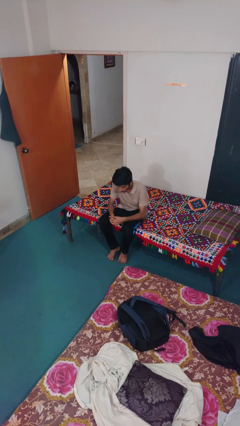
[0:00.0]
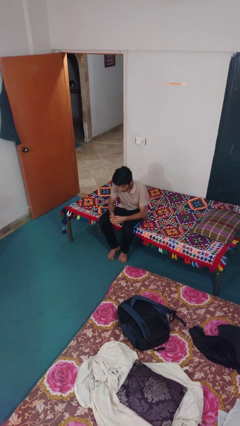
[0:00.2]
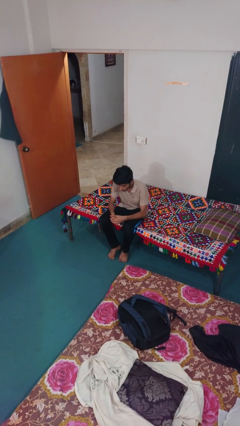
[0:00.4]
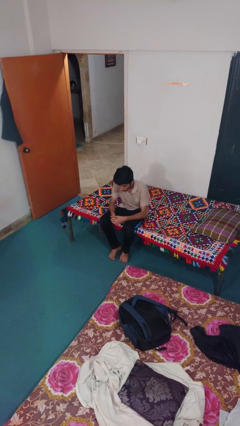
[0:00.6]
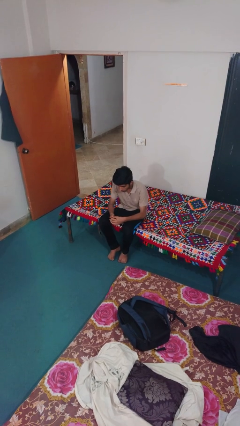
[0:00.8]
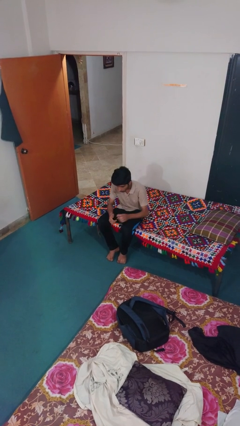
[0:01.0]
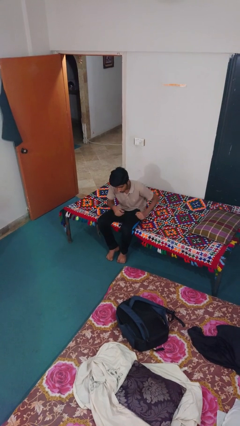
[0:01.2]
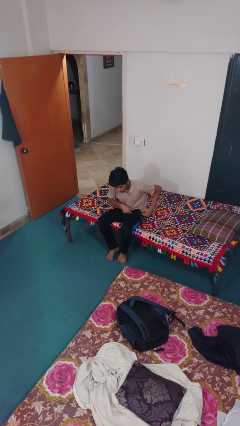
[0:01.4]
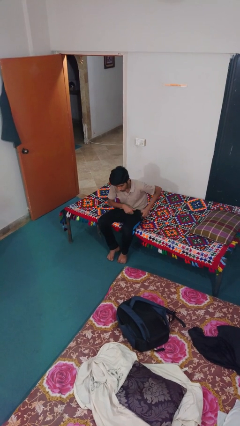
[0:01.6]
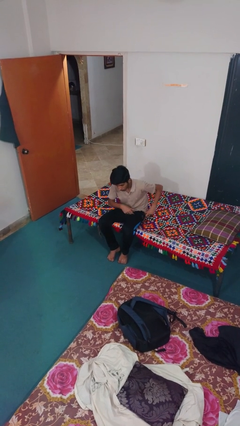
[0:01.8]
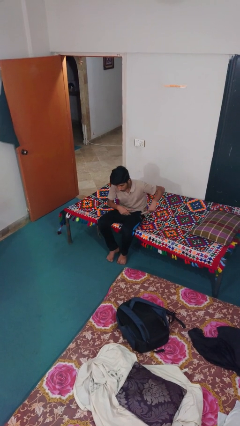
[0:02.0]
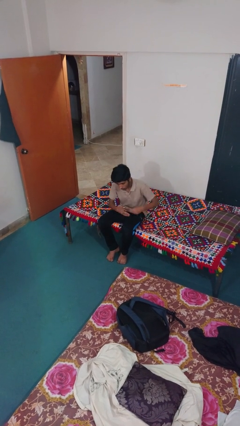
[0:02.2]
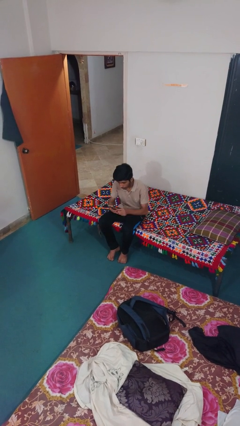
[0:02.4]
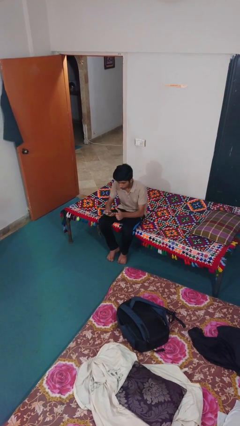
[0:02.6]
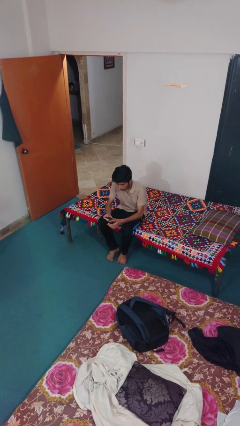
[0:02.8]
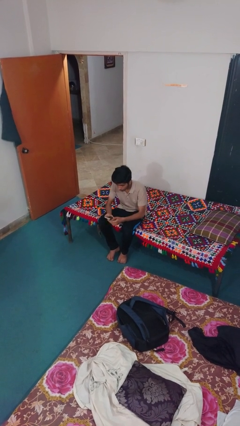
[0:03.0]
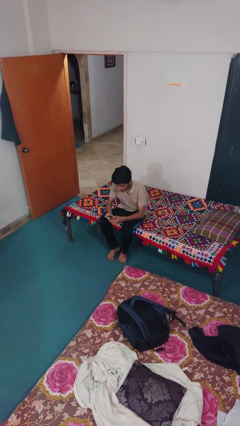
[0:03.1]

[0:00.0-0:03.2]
person takes phone from pocket

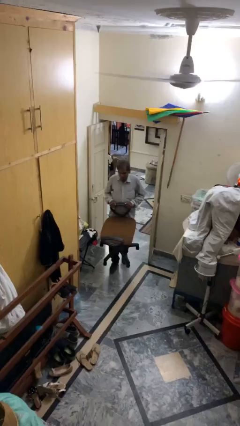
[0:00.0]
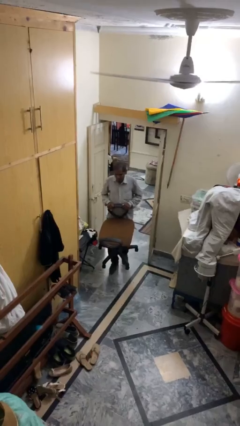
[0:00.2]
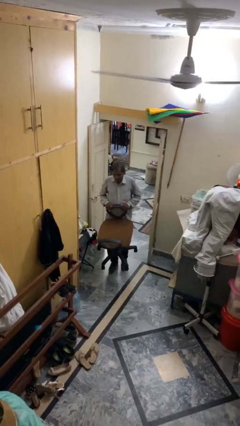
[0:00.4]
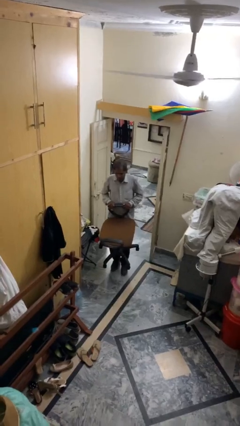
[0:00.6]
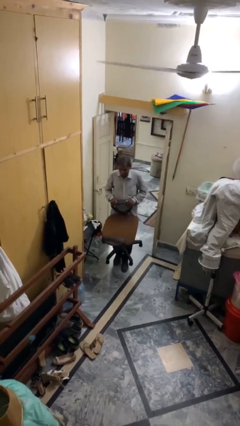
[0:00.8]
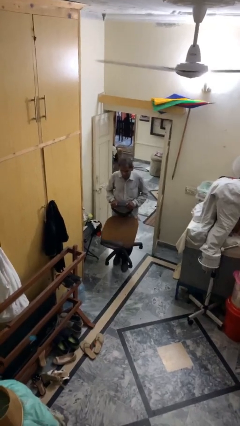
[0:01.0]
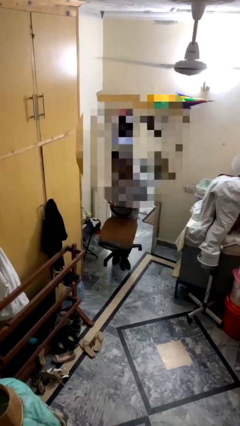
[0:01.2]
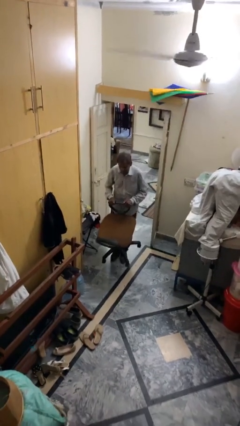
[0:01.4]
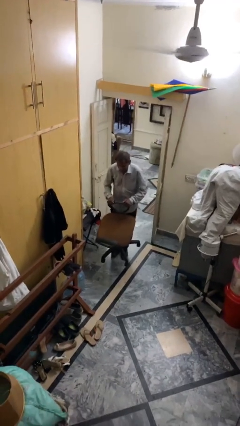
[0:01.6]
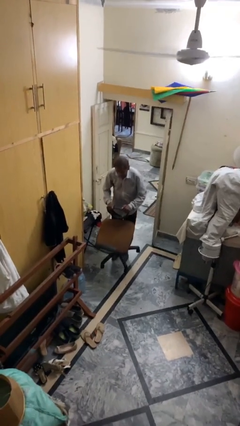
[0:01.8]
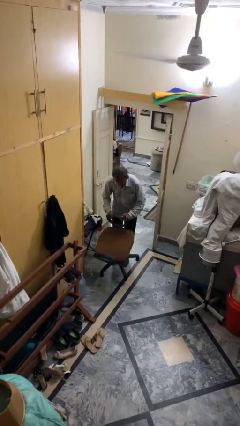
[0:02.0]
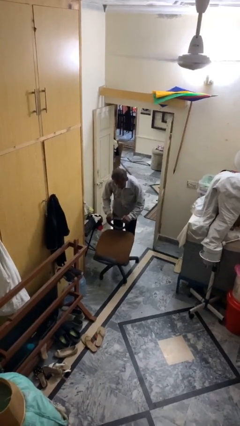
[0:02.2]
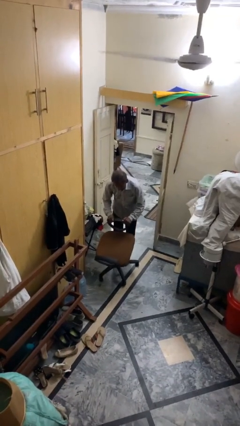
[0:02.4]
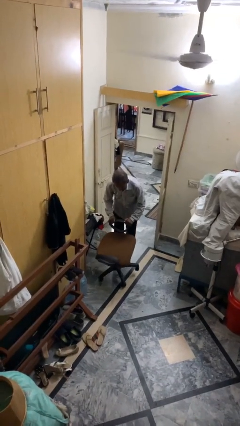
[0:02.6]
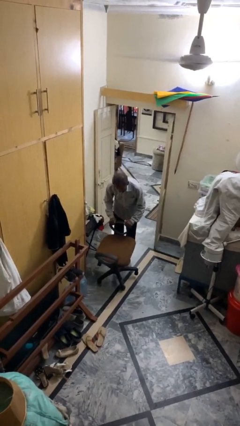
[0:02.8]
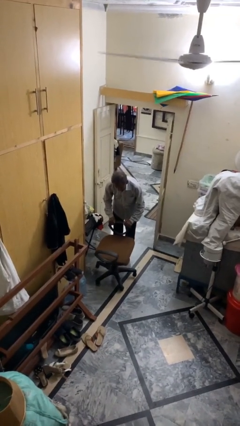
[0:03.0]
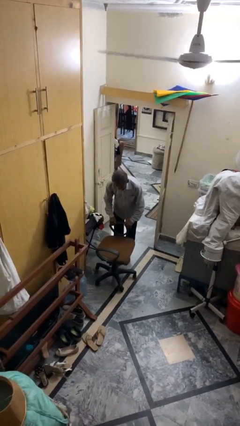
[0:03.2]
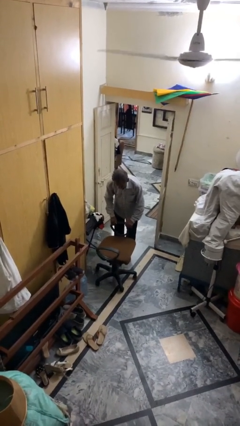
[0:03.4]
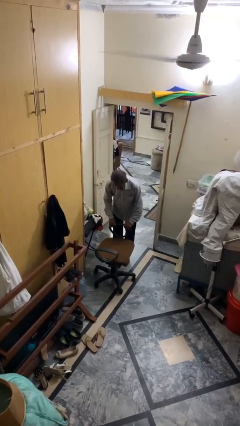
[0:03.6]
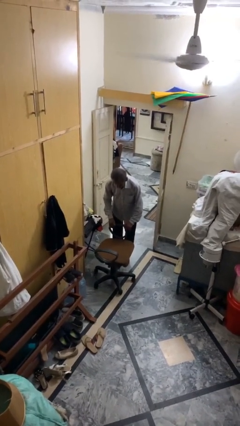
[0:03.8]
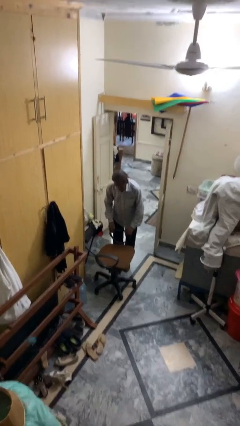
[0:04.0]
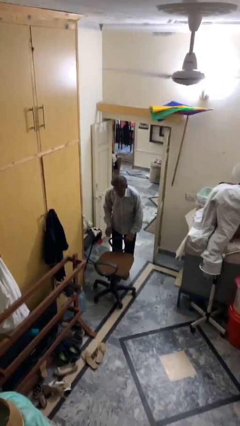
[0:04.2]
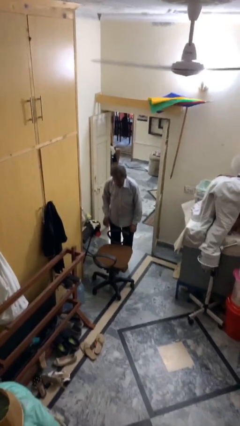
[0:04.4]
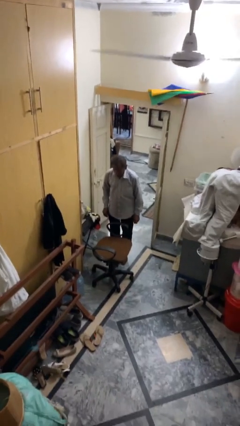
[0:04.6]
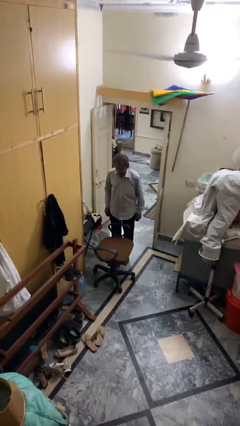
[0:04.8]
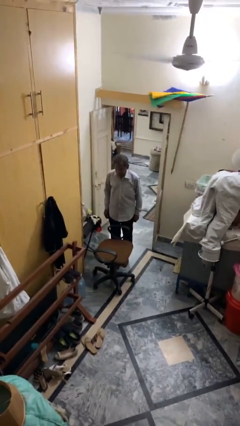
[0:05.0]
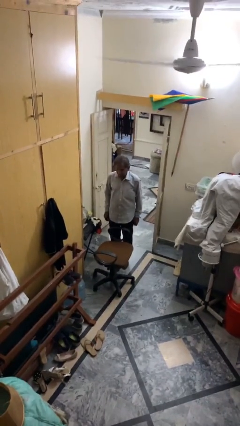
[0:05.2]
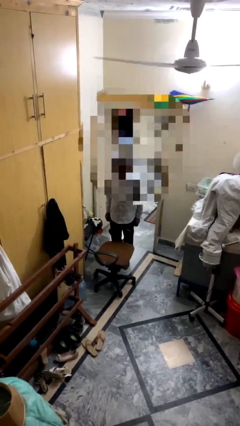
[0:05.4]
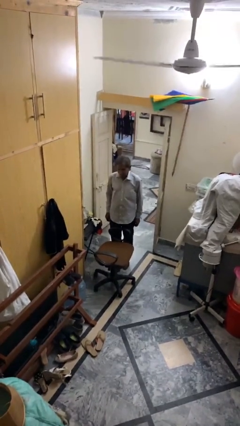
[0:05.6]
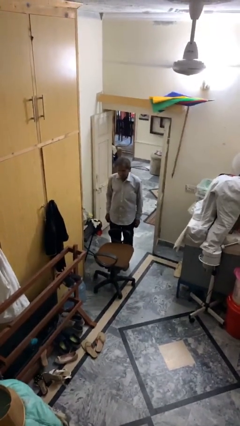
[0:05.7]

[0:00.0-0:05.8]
person puts down object on floor

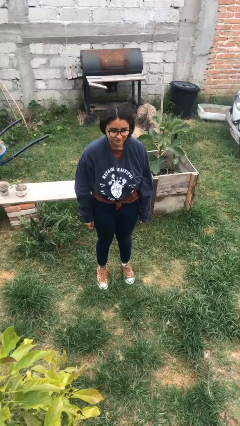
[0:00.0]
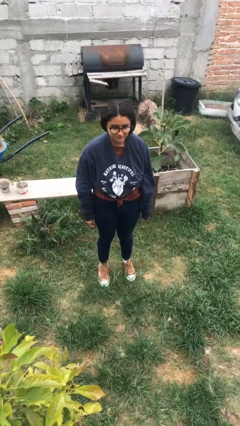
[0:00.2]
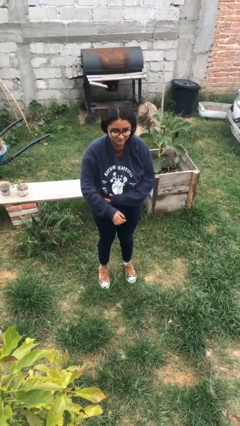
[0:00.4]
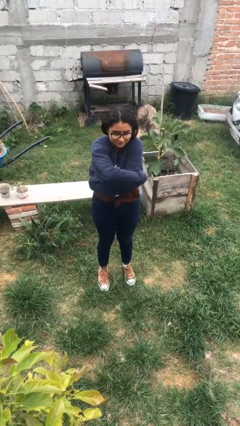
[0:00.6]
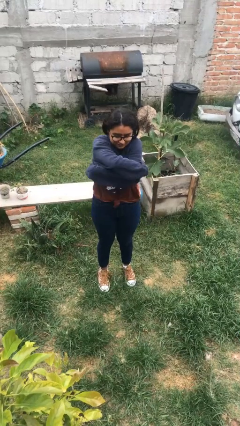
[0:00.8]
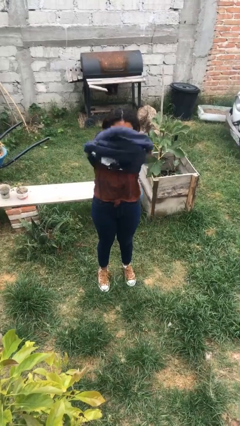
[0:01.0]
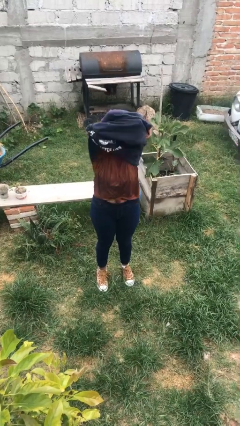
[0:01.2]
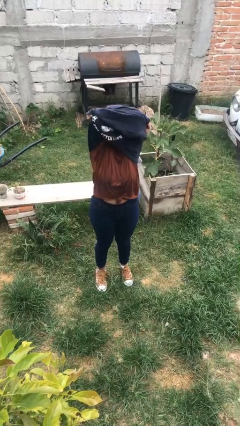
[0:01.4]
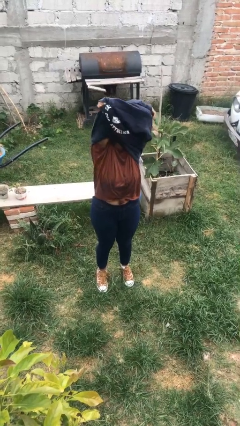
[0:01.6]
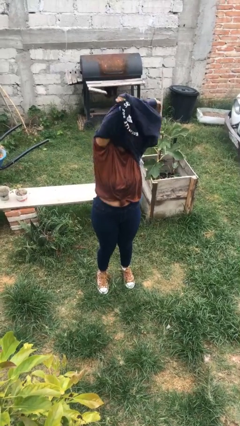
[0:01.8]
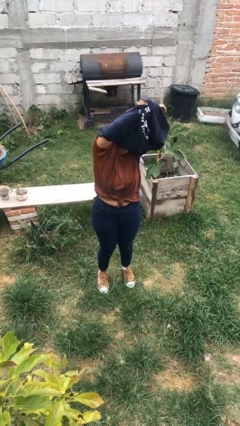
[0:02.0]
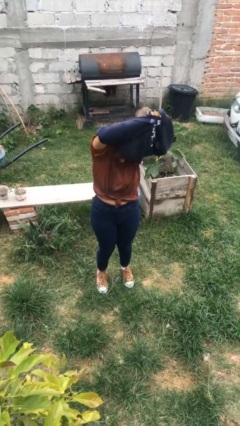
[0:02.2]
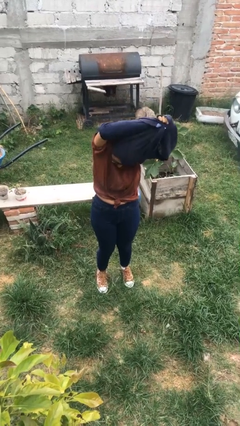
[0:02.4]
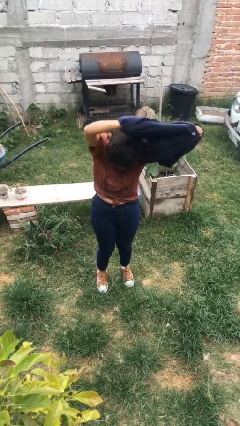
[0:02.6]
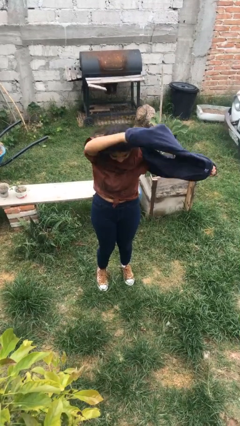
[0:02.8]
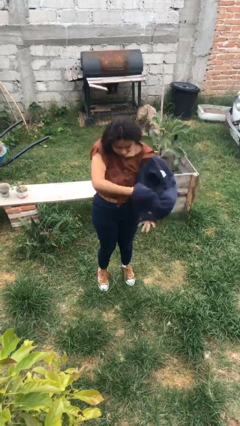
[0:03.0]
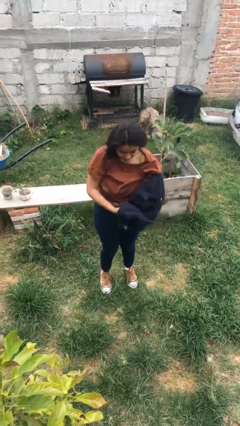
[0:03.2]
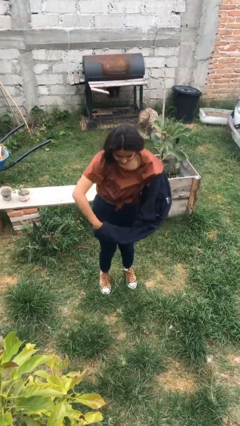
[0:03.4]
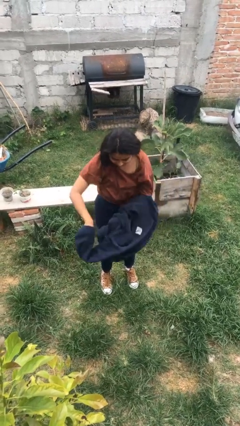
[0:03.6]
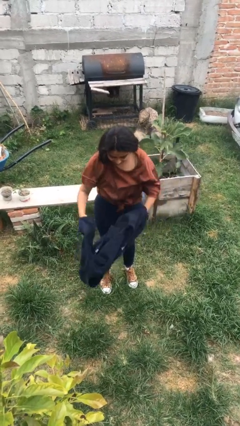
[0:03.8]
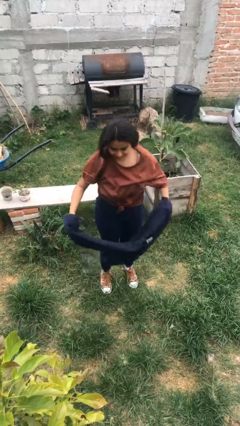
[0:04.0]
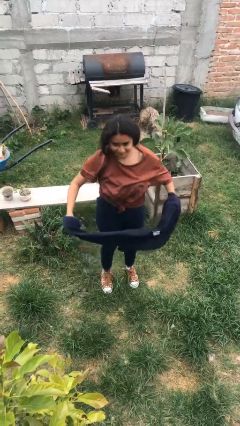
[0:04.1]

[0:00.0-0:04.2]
person takes off shirt

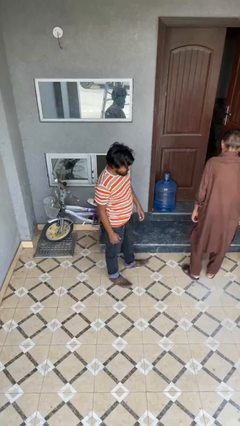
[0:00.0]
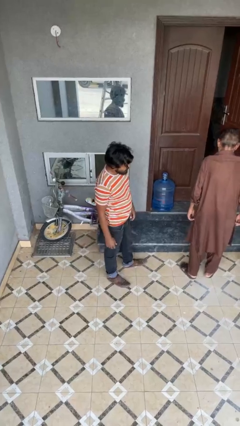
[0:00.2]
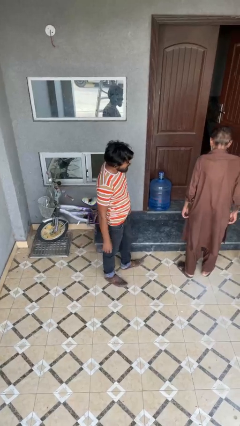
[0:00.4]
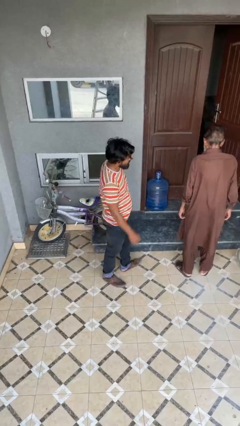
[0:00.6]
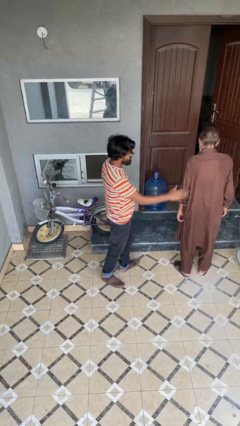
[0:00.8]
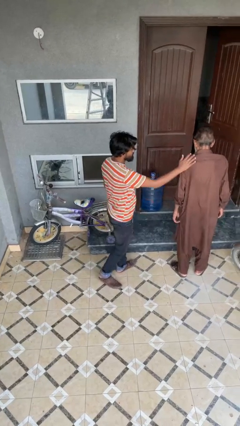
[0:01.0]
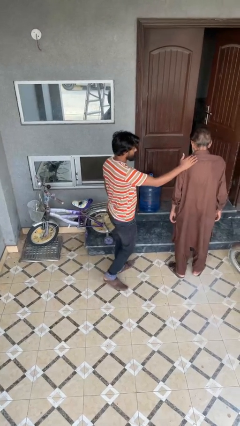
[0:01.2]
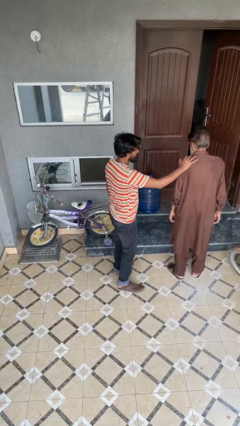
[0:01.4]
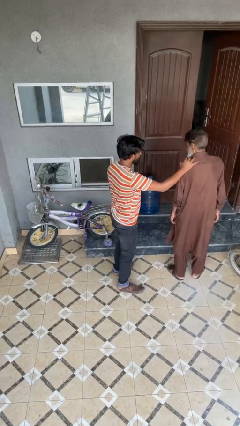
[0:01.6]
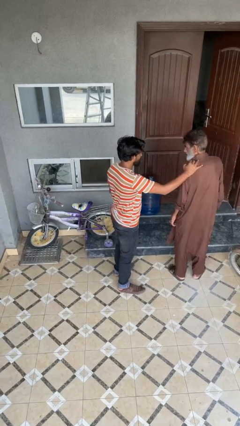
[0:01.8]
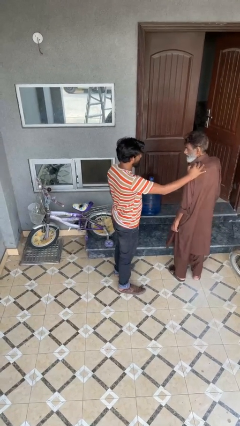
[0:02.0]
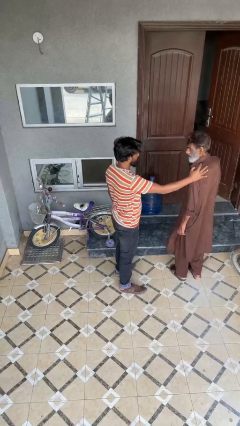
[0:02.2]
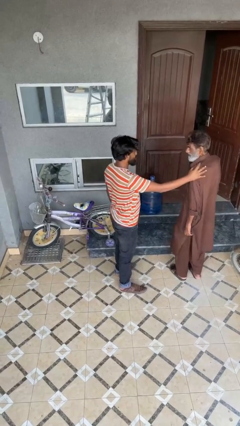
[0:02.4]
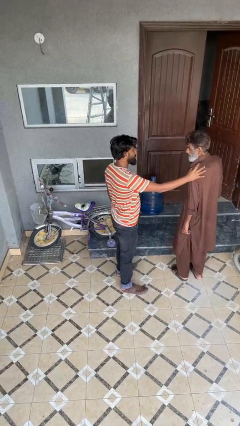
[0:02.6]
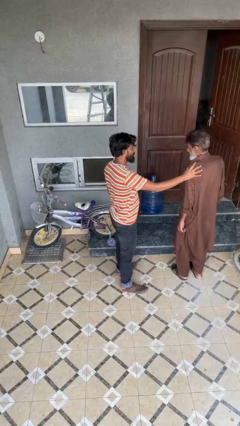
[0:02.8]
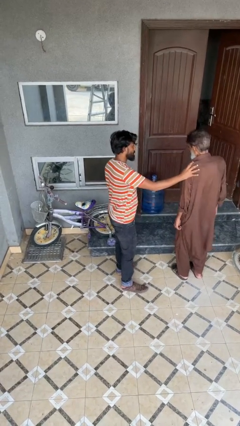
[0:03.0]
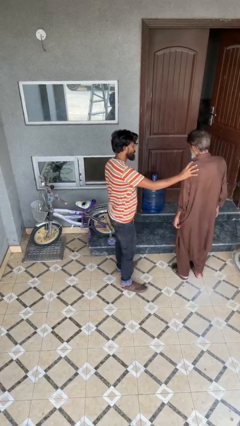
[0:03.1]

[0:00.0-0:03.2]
person touches back of person

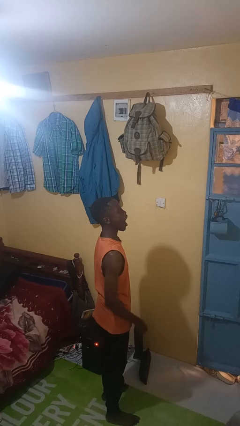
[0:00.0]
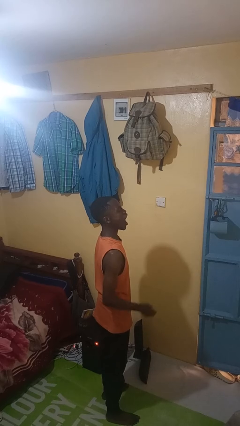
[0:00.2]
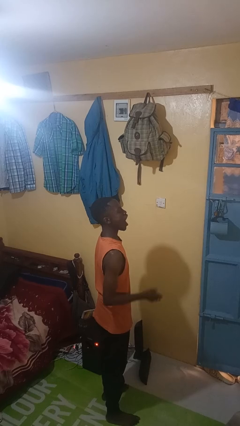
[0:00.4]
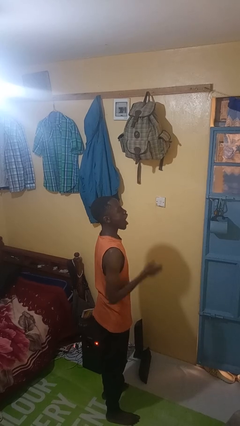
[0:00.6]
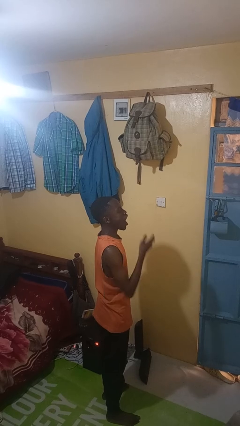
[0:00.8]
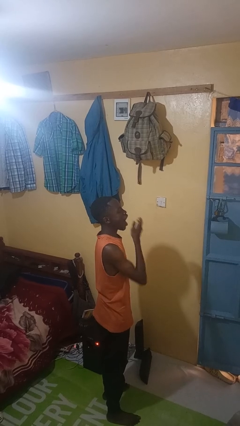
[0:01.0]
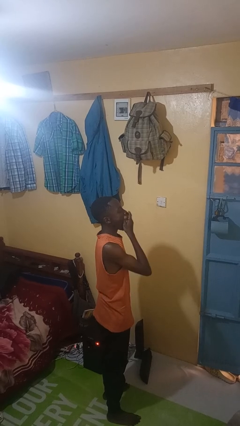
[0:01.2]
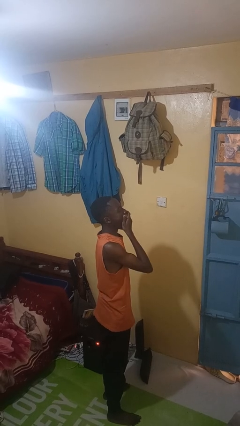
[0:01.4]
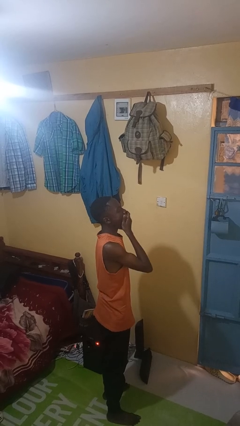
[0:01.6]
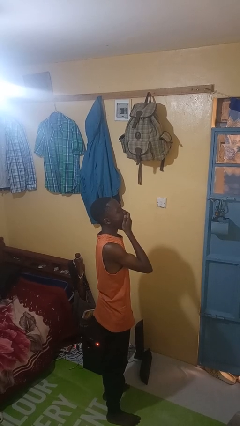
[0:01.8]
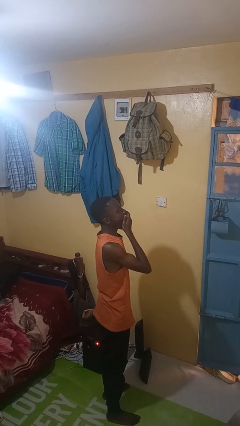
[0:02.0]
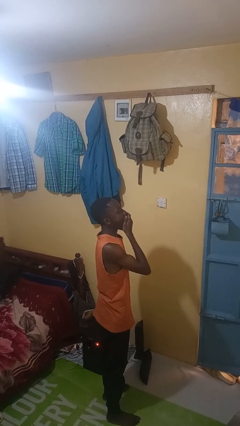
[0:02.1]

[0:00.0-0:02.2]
person yawns
